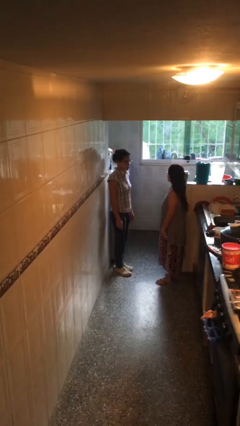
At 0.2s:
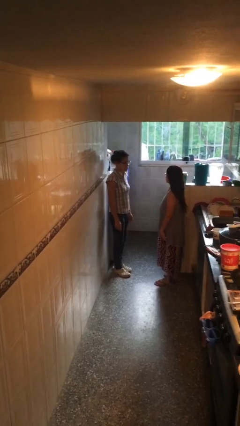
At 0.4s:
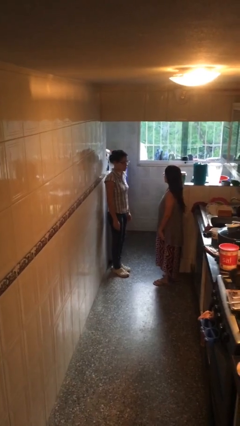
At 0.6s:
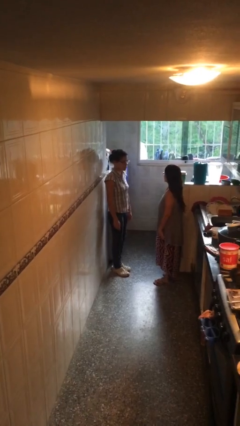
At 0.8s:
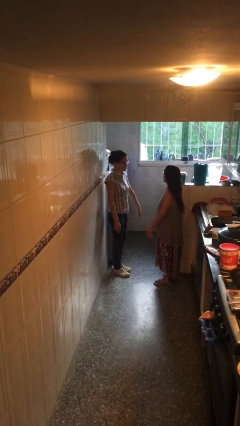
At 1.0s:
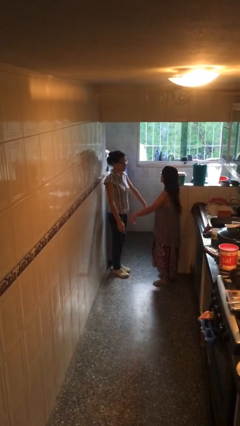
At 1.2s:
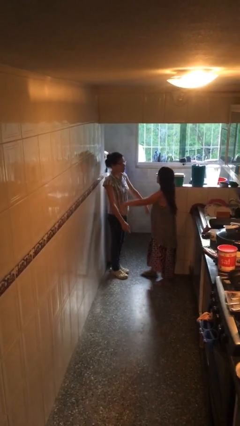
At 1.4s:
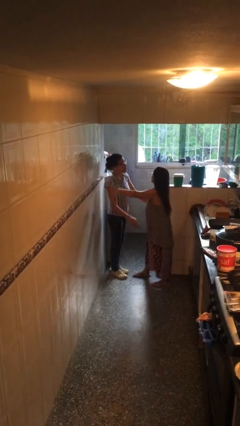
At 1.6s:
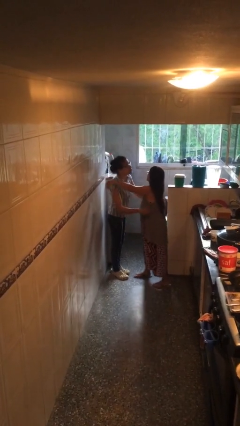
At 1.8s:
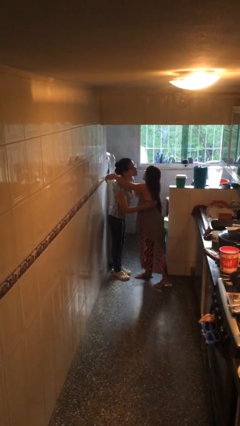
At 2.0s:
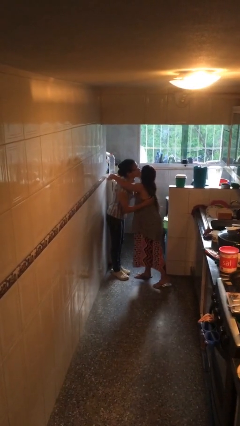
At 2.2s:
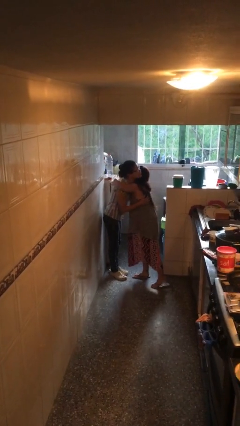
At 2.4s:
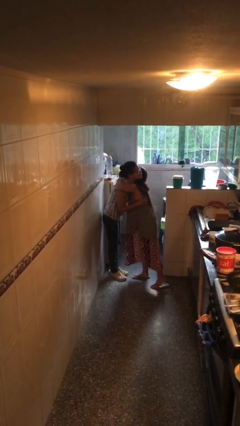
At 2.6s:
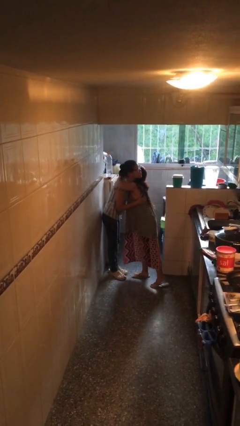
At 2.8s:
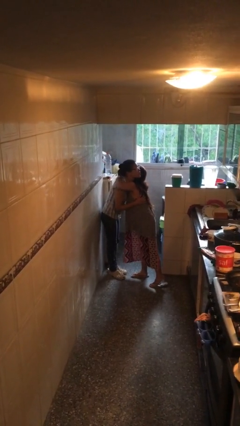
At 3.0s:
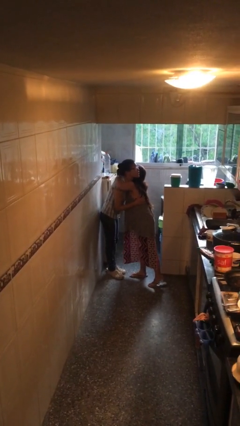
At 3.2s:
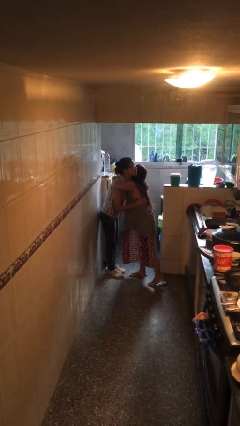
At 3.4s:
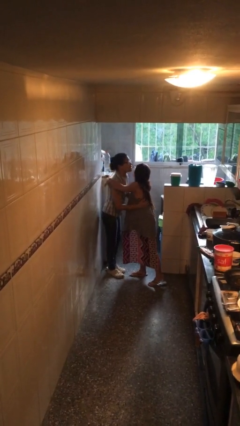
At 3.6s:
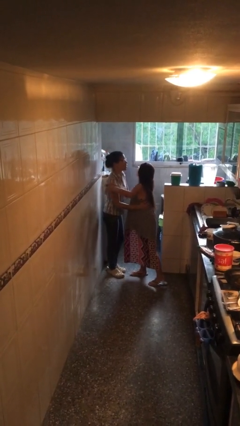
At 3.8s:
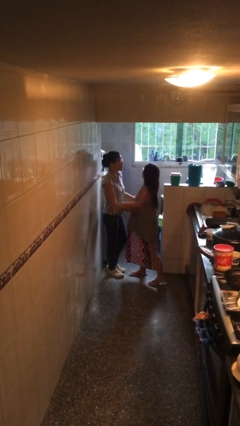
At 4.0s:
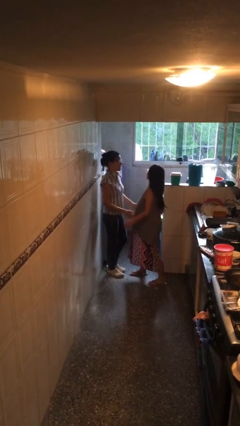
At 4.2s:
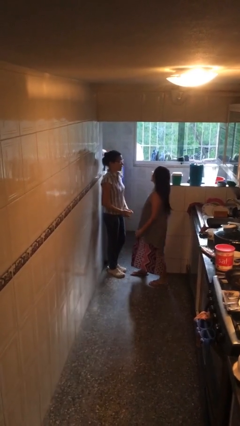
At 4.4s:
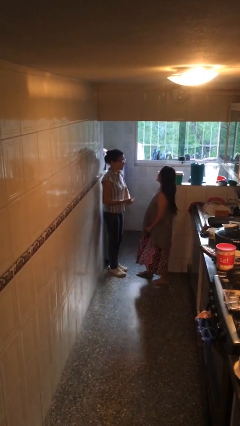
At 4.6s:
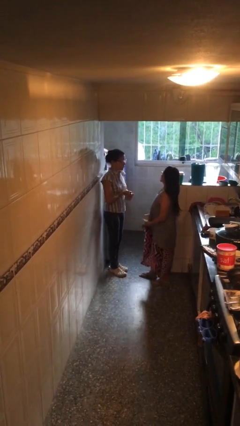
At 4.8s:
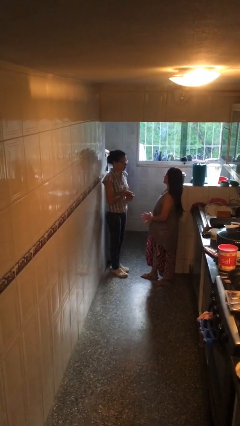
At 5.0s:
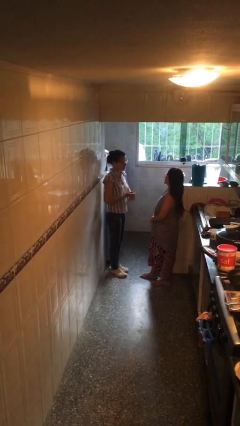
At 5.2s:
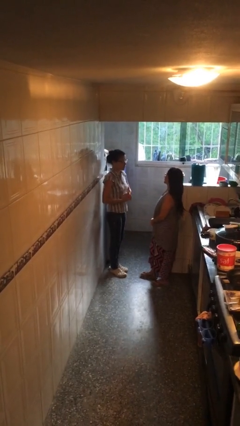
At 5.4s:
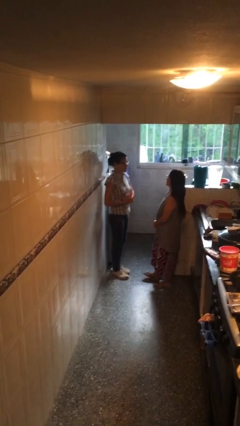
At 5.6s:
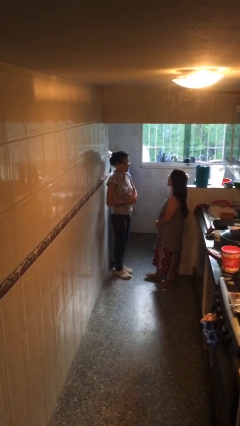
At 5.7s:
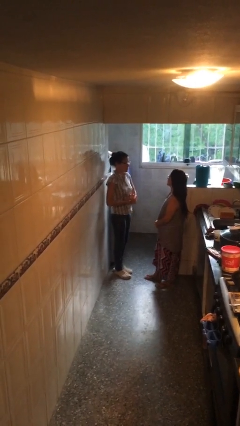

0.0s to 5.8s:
person embraces person

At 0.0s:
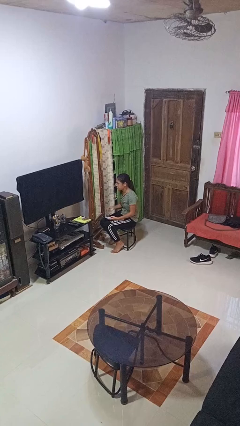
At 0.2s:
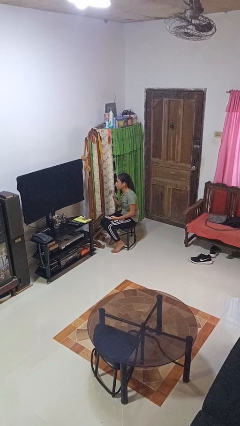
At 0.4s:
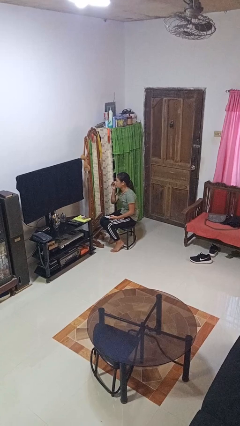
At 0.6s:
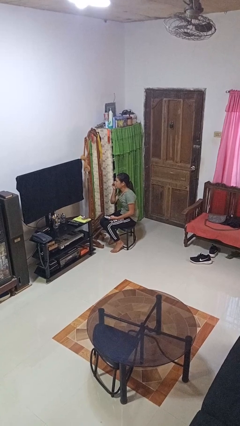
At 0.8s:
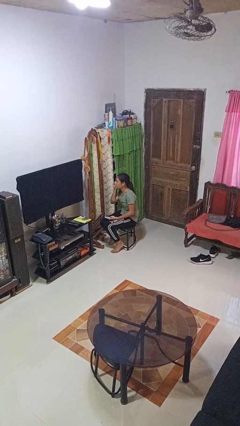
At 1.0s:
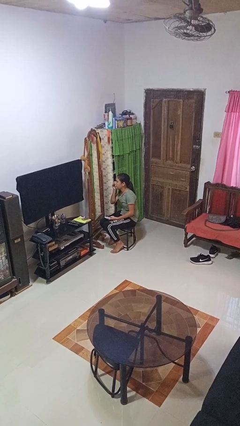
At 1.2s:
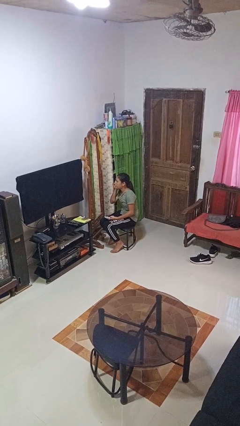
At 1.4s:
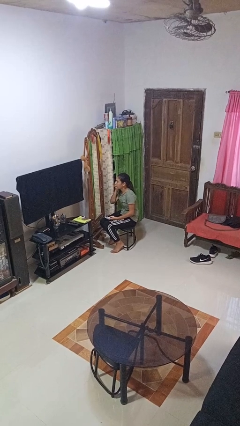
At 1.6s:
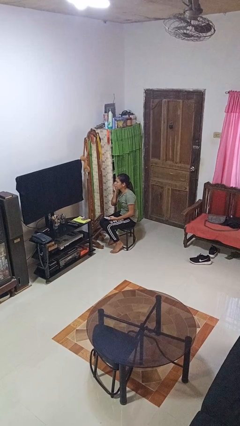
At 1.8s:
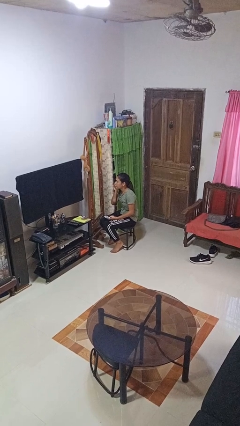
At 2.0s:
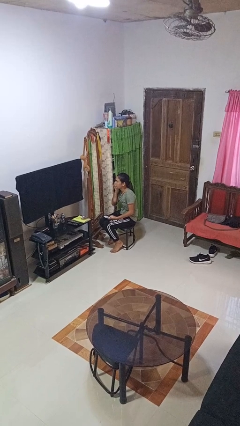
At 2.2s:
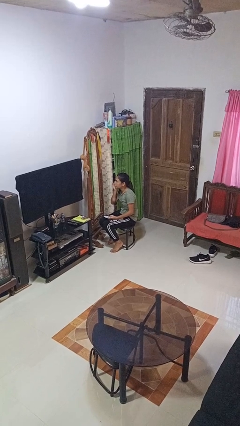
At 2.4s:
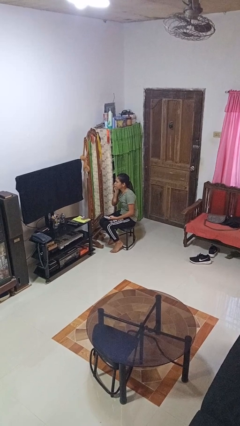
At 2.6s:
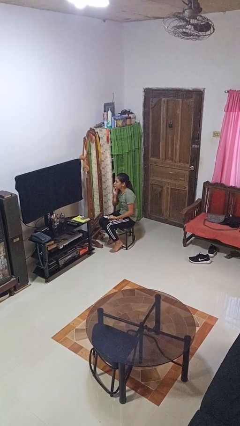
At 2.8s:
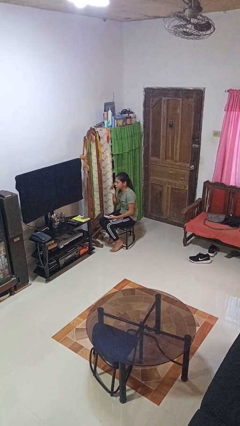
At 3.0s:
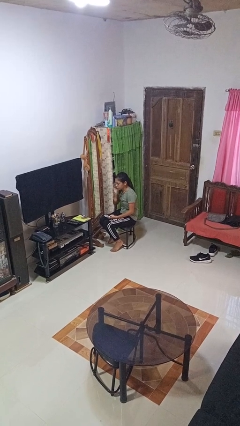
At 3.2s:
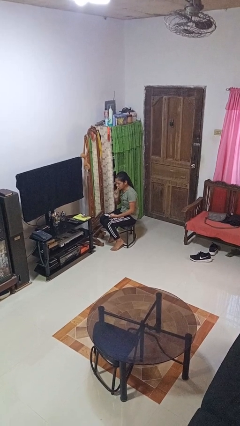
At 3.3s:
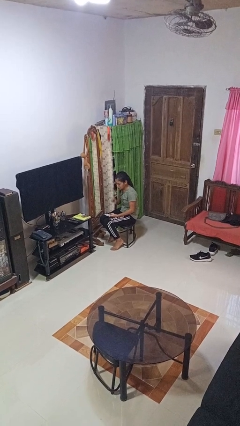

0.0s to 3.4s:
person applies foundation makeup

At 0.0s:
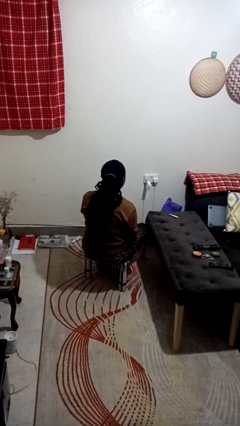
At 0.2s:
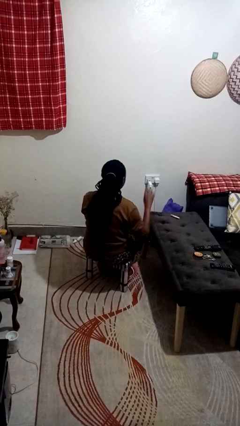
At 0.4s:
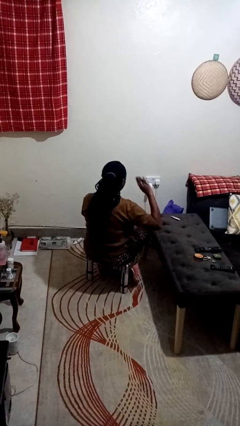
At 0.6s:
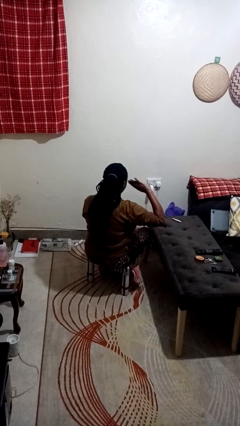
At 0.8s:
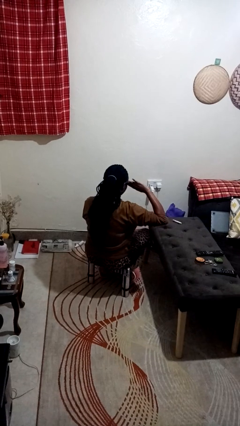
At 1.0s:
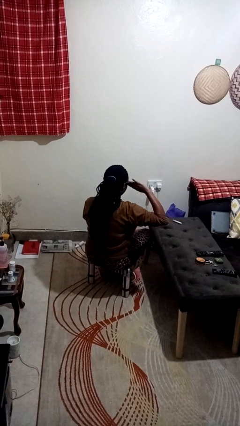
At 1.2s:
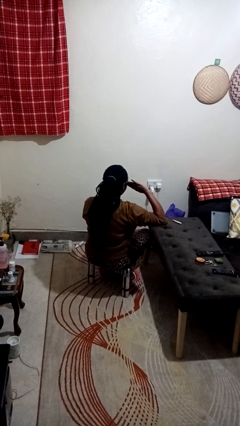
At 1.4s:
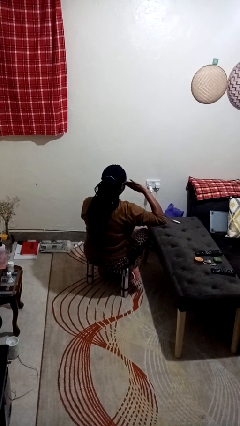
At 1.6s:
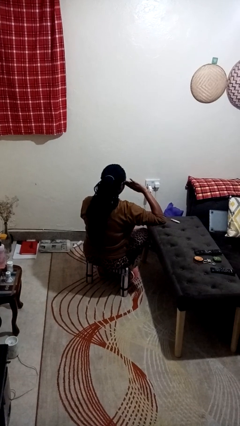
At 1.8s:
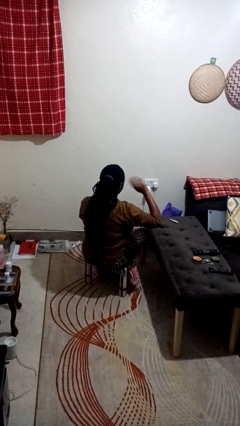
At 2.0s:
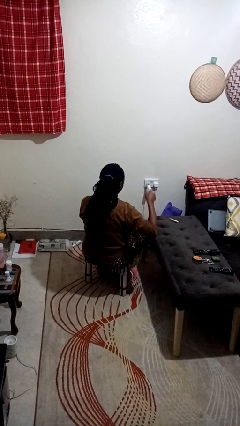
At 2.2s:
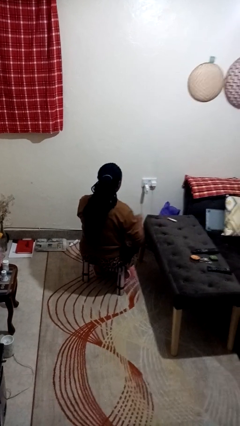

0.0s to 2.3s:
person salutes

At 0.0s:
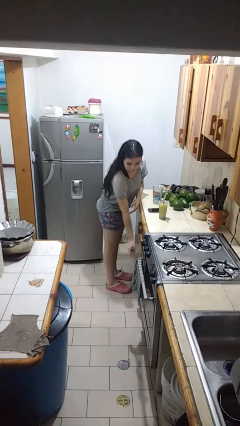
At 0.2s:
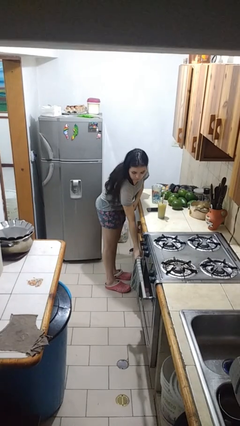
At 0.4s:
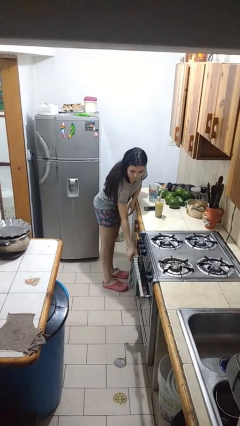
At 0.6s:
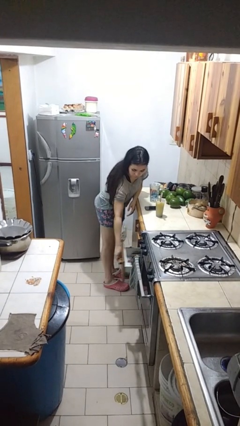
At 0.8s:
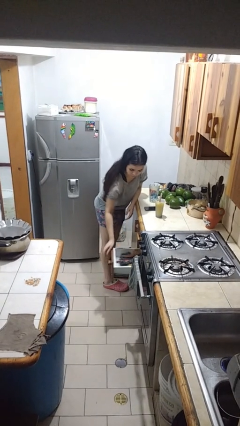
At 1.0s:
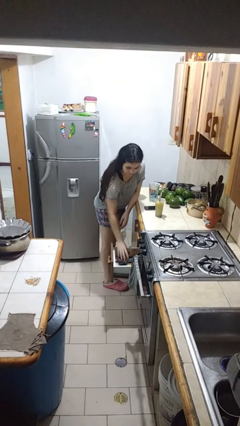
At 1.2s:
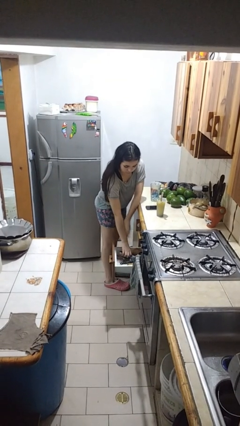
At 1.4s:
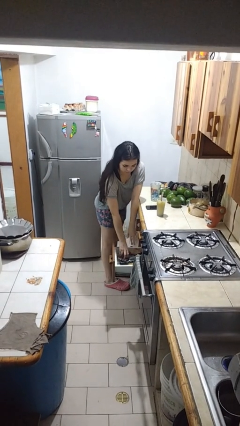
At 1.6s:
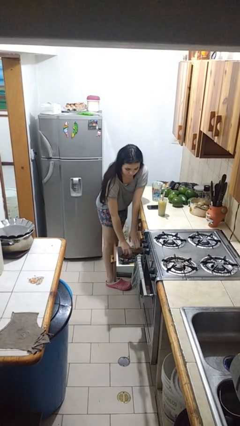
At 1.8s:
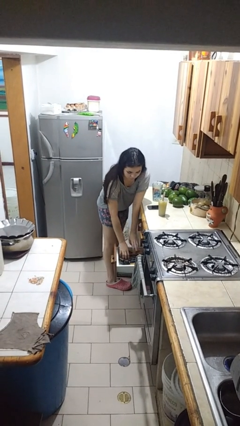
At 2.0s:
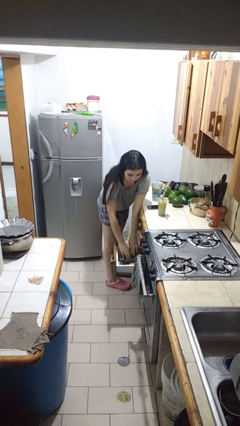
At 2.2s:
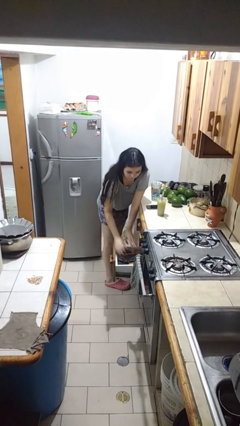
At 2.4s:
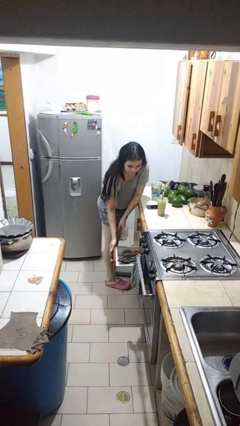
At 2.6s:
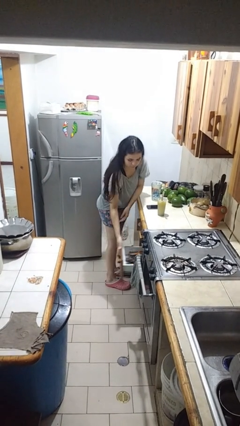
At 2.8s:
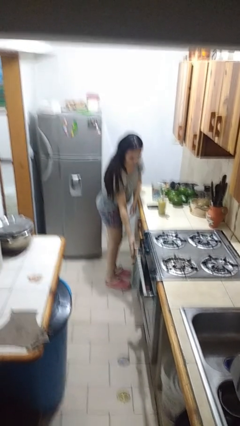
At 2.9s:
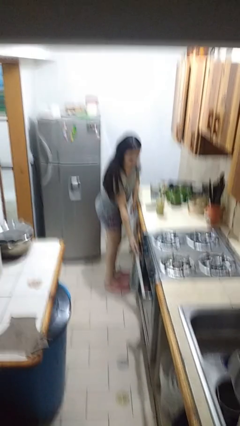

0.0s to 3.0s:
person searches in kitchen drawer

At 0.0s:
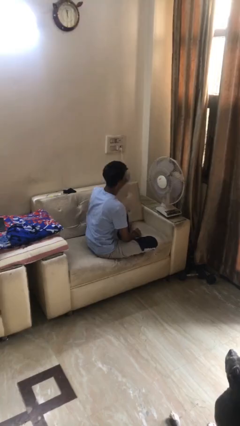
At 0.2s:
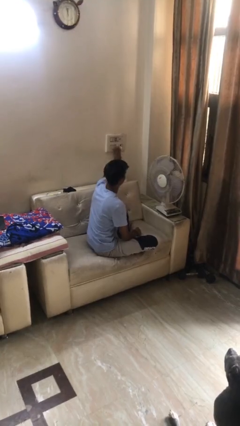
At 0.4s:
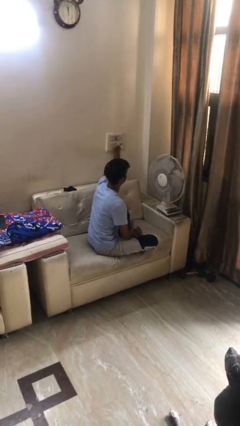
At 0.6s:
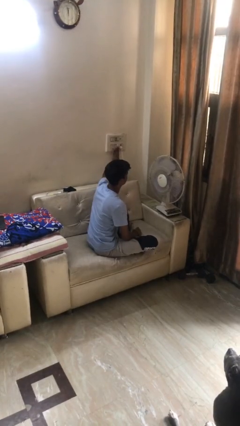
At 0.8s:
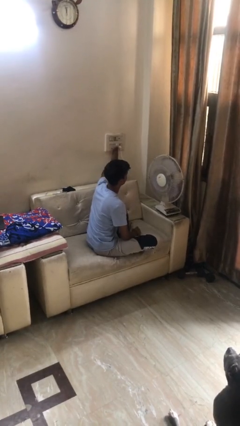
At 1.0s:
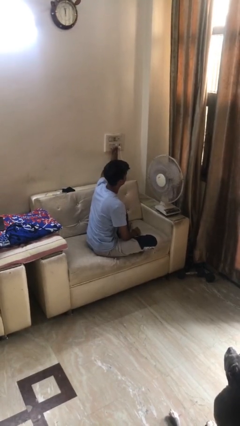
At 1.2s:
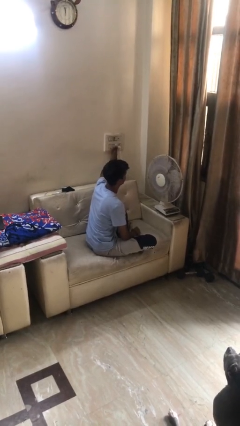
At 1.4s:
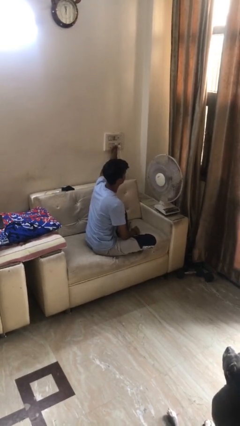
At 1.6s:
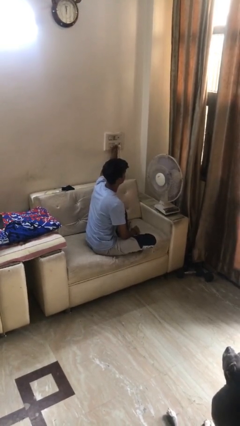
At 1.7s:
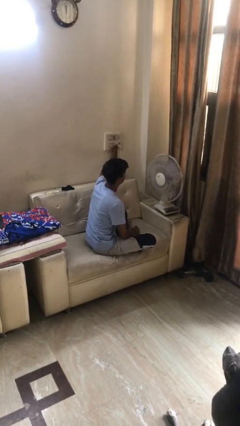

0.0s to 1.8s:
person turns on fan

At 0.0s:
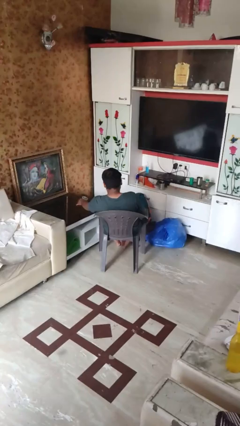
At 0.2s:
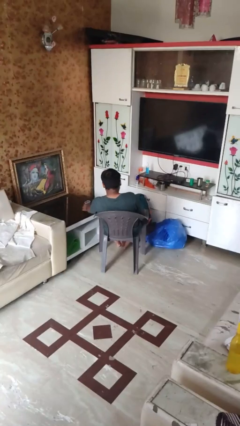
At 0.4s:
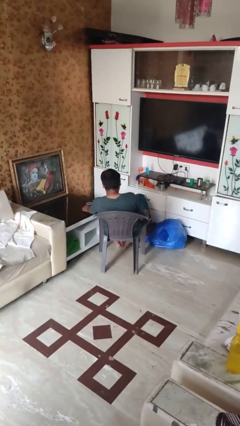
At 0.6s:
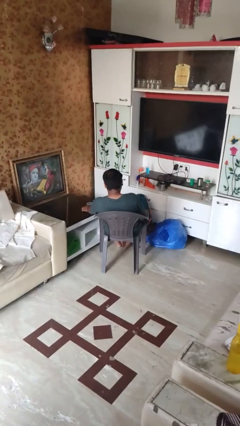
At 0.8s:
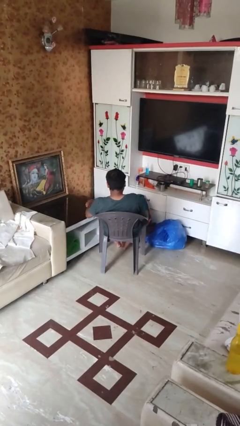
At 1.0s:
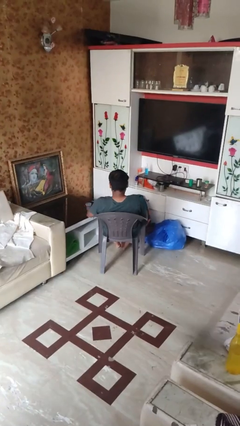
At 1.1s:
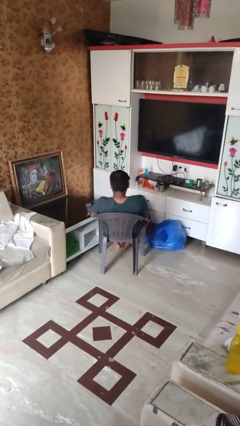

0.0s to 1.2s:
person sets upright glass

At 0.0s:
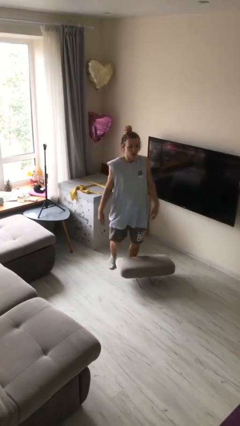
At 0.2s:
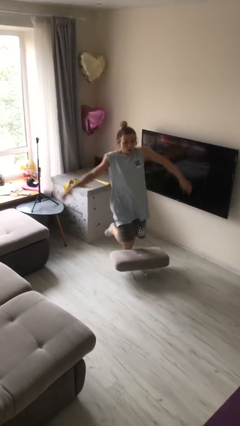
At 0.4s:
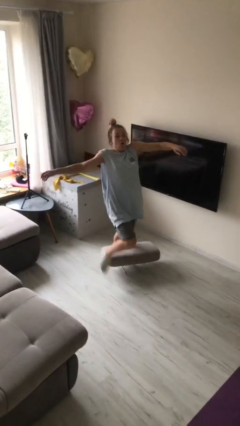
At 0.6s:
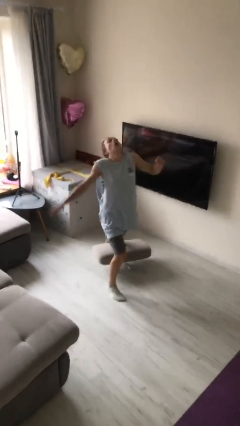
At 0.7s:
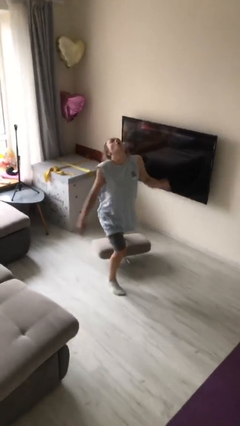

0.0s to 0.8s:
person trips on object on floor
